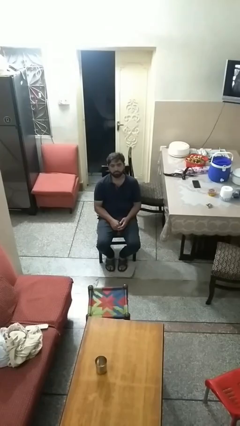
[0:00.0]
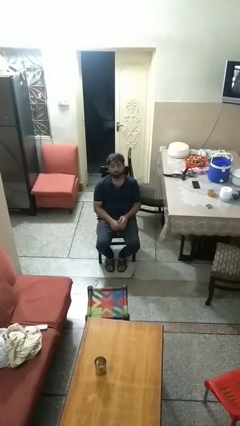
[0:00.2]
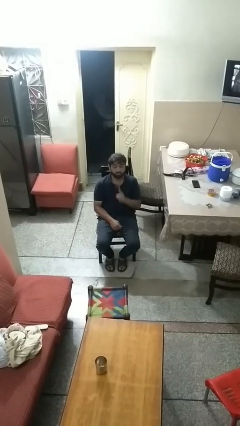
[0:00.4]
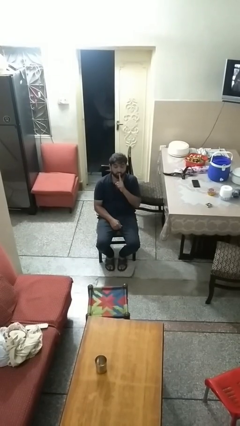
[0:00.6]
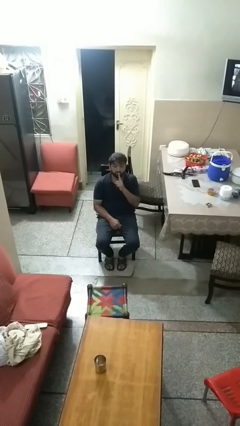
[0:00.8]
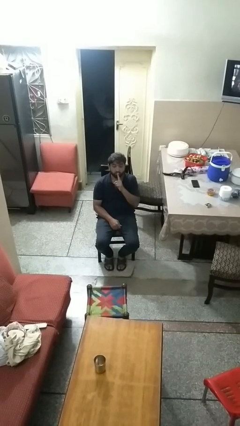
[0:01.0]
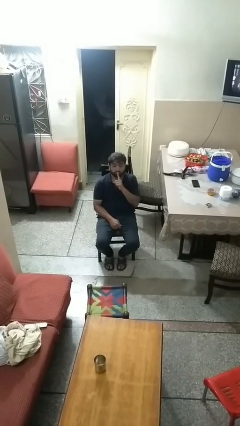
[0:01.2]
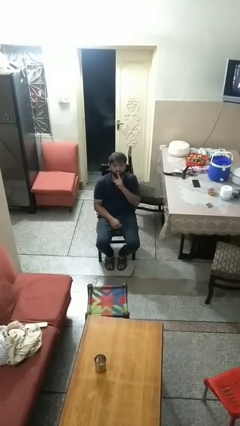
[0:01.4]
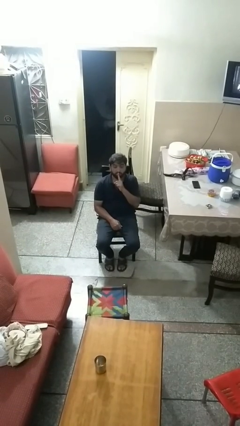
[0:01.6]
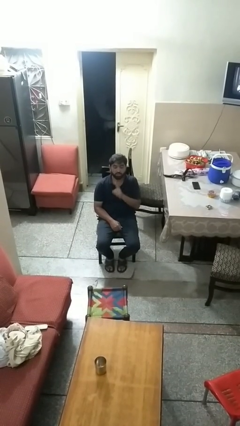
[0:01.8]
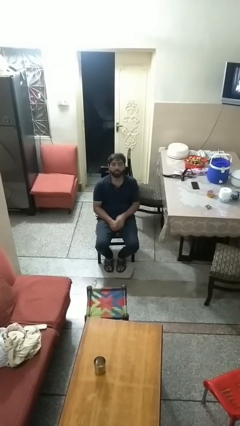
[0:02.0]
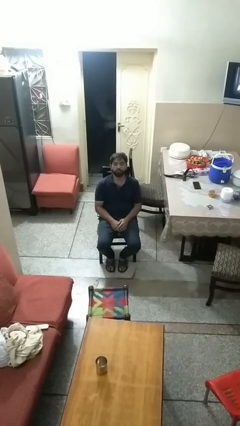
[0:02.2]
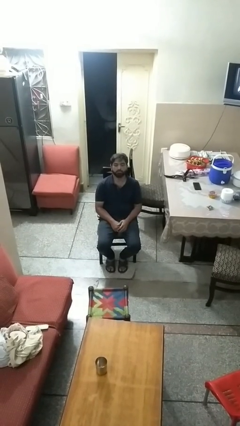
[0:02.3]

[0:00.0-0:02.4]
person gestures be quiet

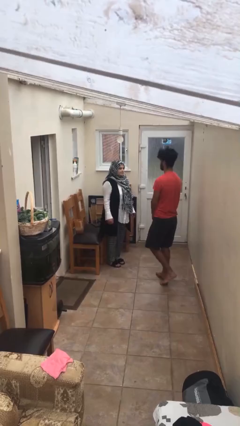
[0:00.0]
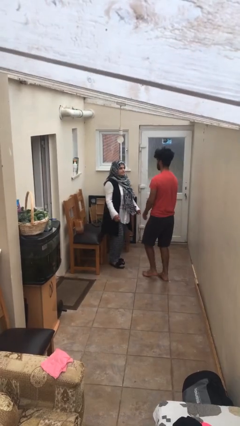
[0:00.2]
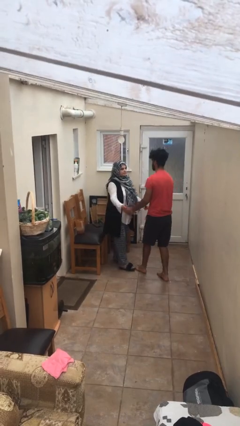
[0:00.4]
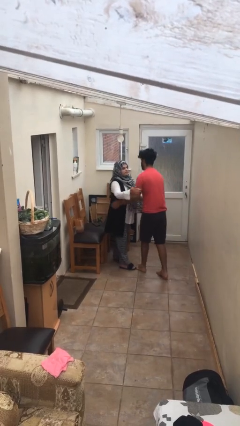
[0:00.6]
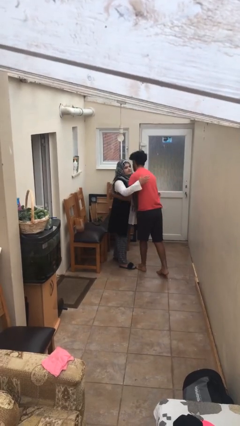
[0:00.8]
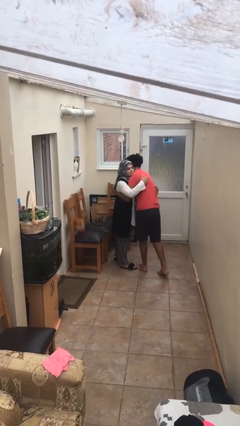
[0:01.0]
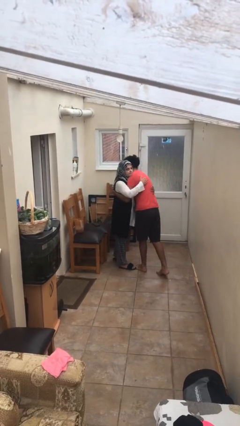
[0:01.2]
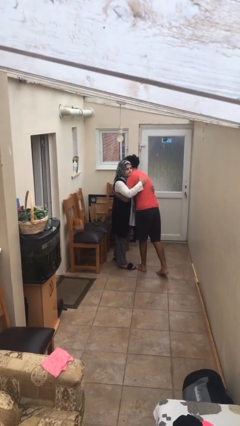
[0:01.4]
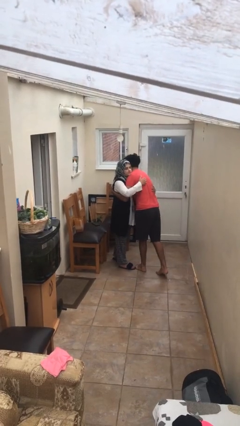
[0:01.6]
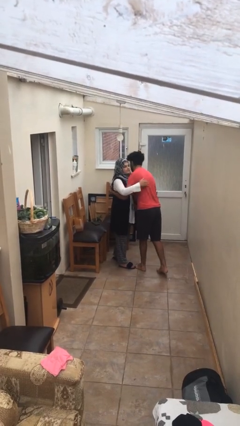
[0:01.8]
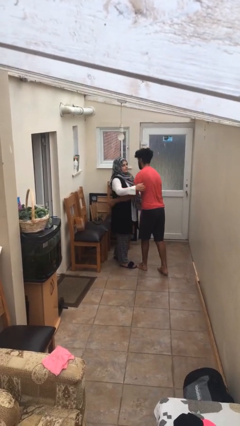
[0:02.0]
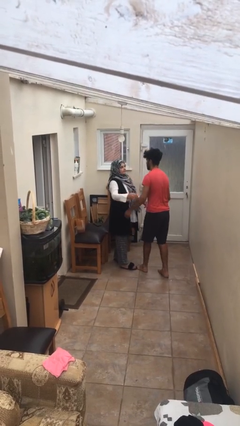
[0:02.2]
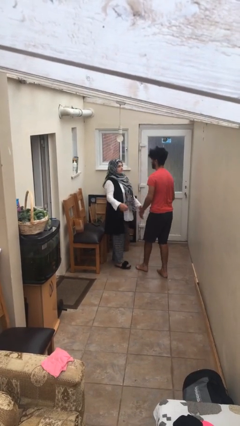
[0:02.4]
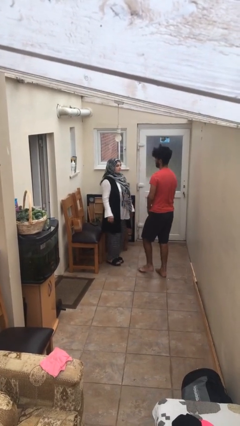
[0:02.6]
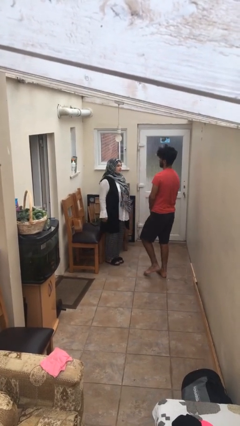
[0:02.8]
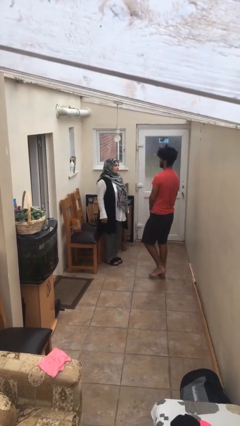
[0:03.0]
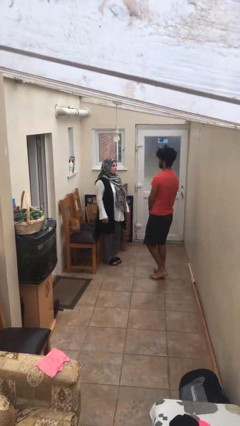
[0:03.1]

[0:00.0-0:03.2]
person embraces person

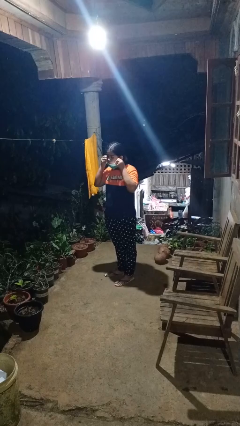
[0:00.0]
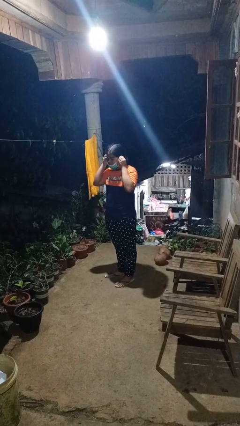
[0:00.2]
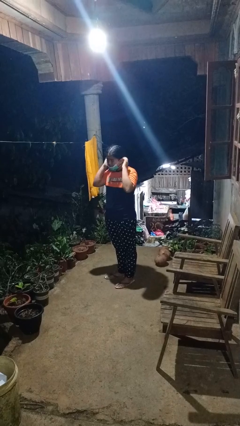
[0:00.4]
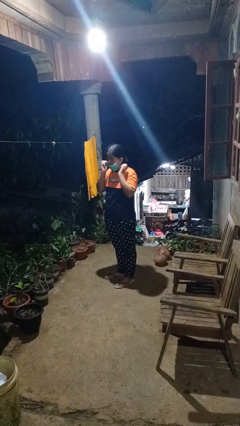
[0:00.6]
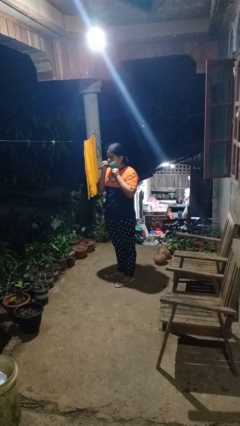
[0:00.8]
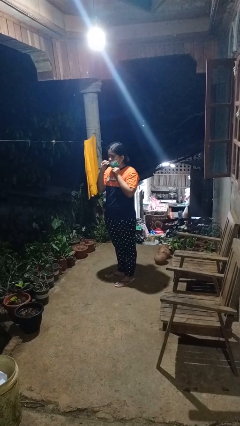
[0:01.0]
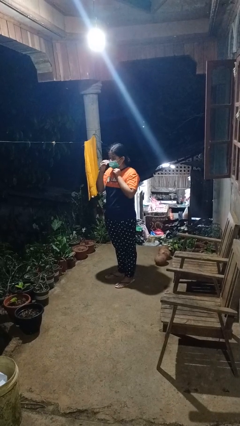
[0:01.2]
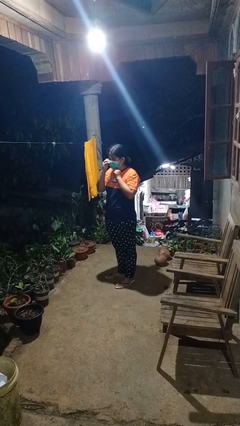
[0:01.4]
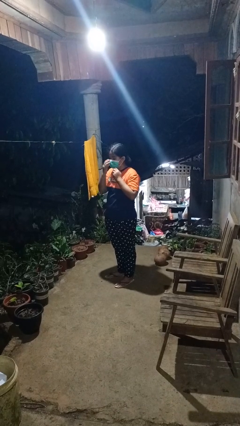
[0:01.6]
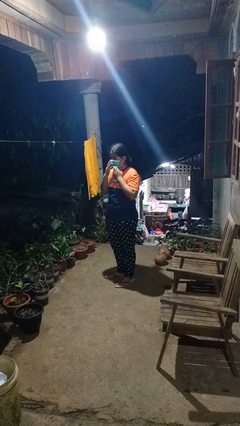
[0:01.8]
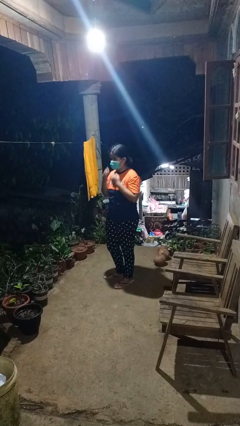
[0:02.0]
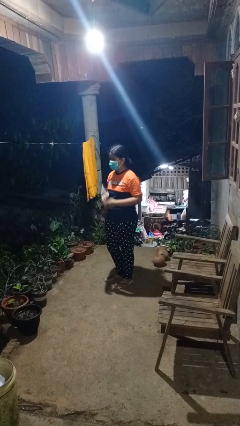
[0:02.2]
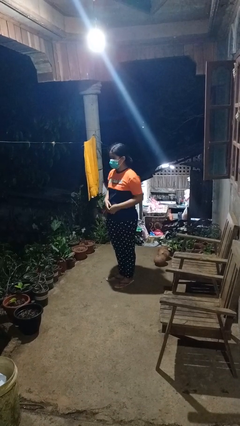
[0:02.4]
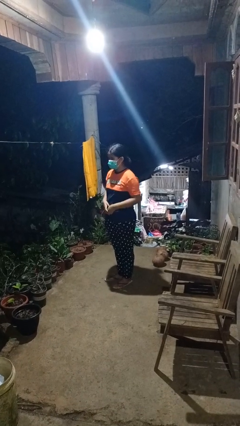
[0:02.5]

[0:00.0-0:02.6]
person puts on facemask

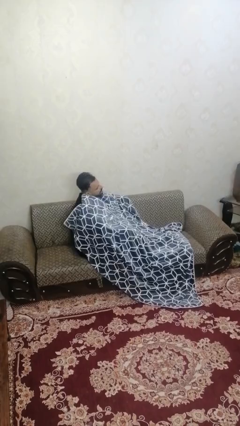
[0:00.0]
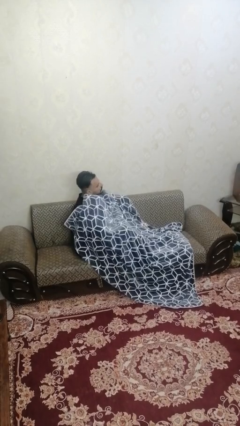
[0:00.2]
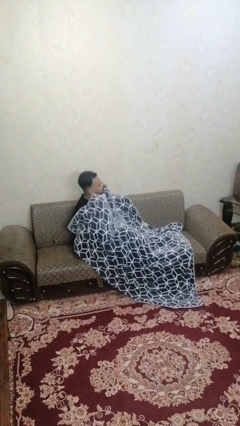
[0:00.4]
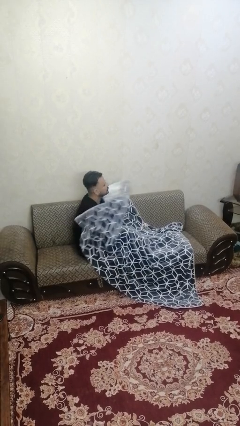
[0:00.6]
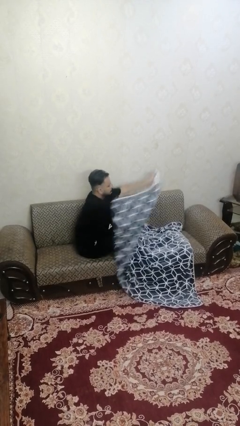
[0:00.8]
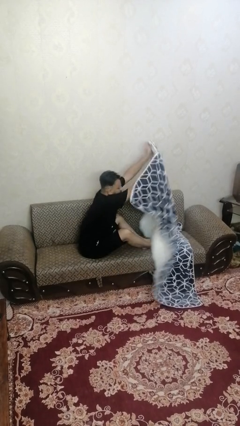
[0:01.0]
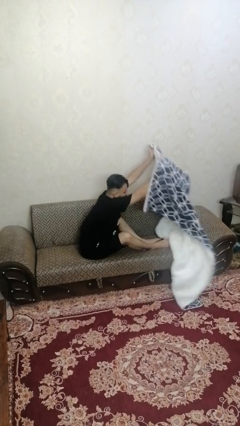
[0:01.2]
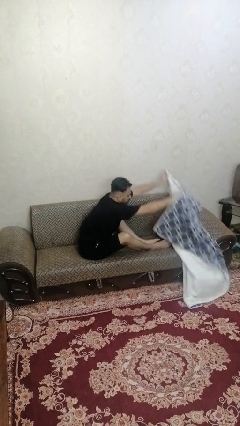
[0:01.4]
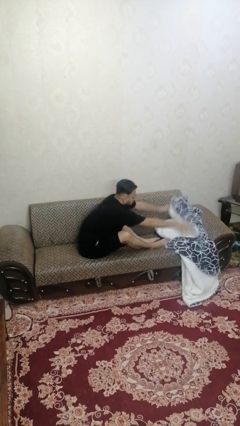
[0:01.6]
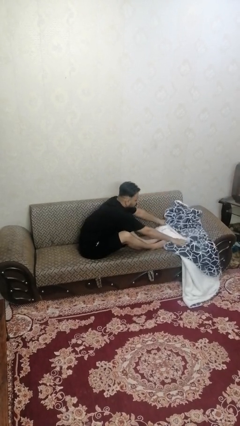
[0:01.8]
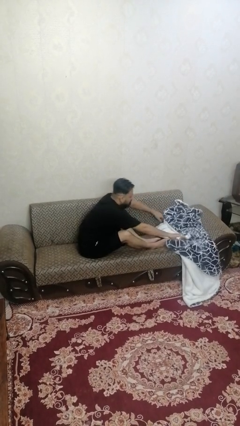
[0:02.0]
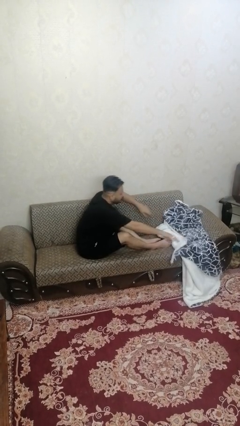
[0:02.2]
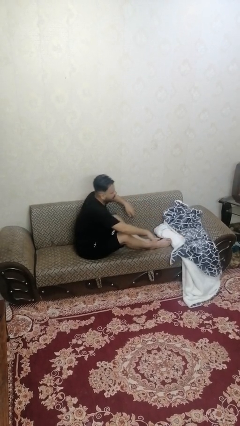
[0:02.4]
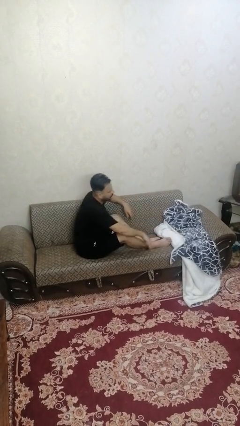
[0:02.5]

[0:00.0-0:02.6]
person uncovers with blanket

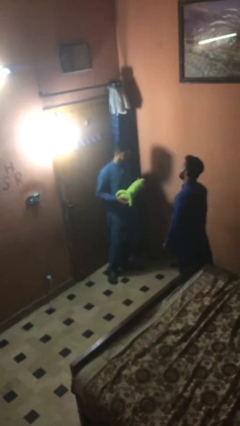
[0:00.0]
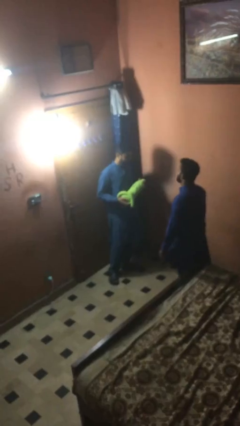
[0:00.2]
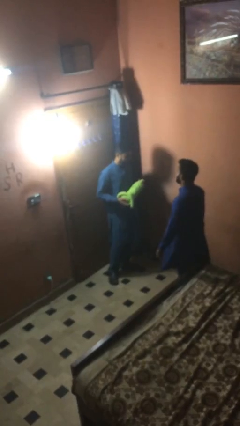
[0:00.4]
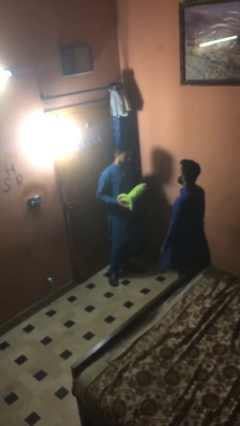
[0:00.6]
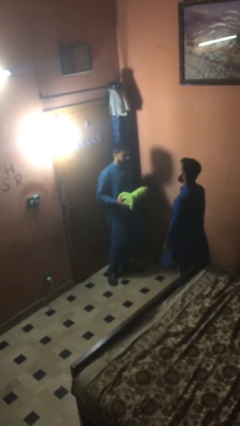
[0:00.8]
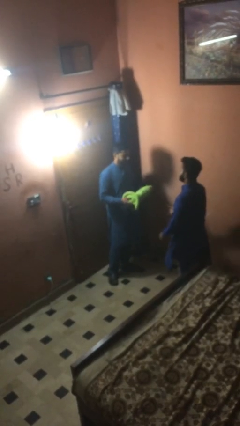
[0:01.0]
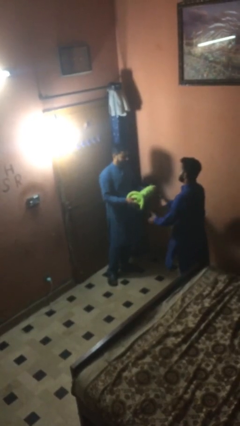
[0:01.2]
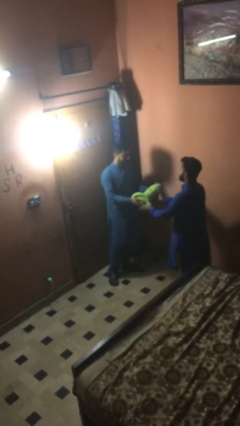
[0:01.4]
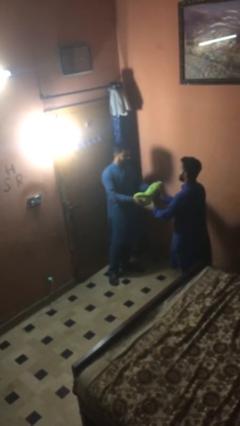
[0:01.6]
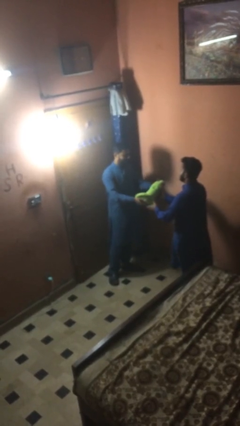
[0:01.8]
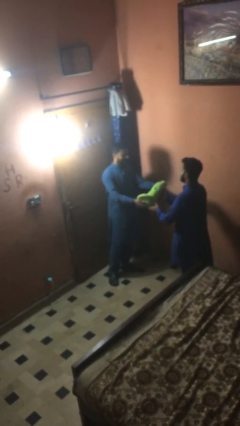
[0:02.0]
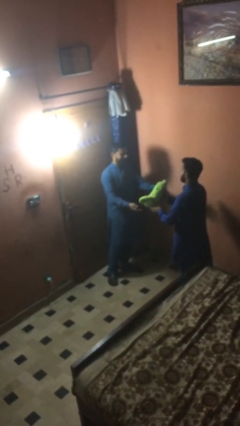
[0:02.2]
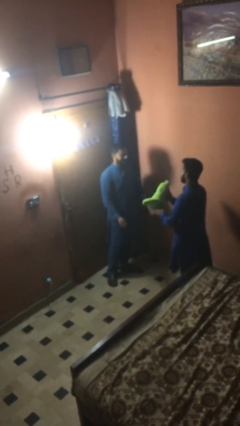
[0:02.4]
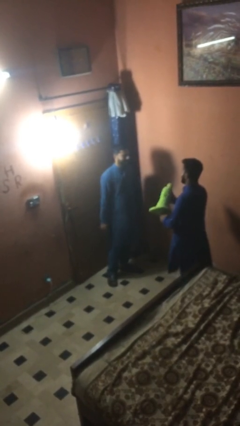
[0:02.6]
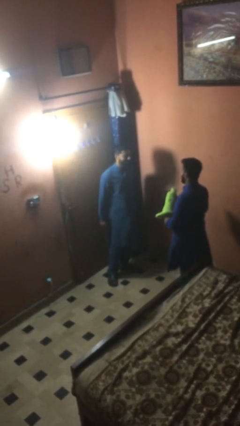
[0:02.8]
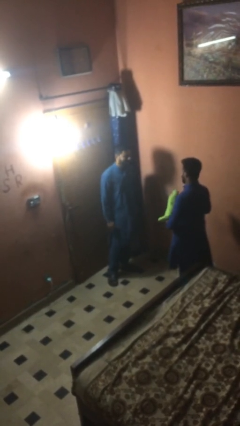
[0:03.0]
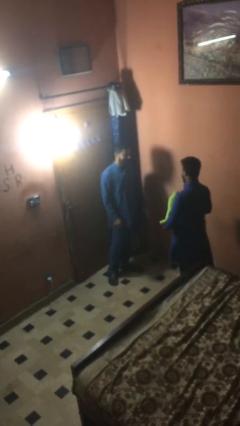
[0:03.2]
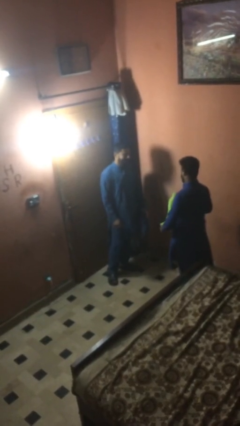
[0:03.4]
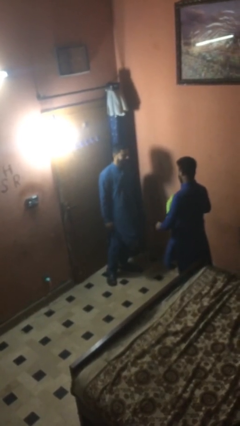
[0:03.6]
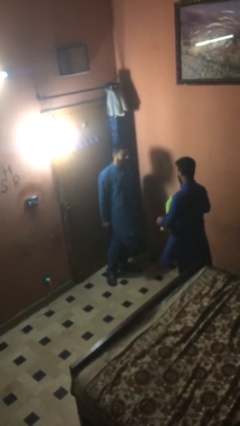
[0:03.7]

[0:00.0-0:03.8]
person transfers object to person

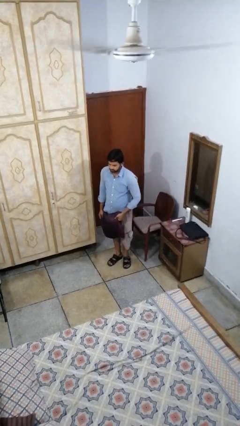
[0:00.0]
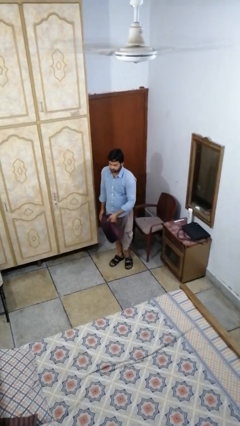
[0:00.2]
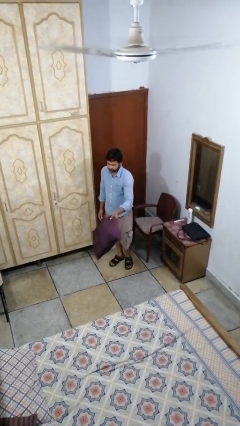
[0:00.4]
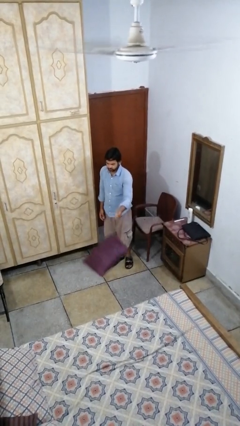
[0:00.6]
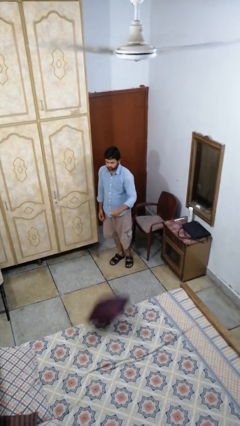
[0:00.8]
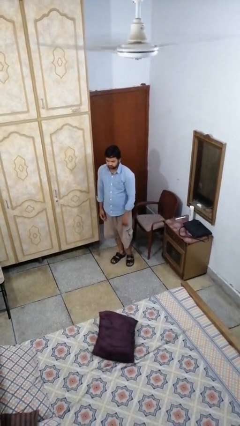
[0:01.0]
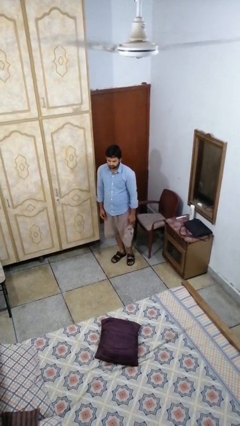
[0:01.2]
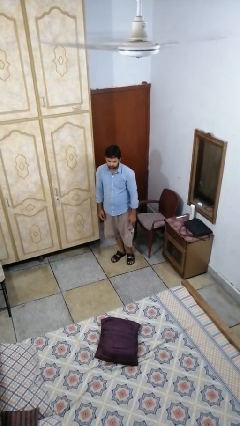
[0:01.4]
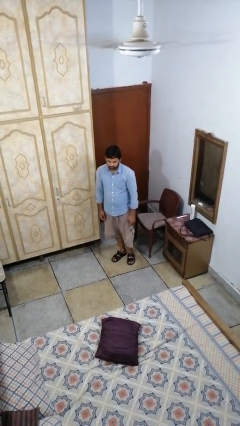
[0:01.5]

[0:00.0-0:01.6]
person throws object on bed

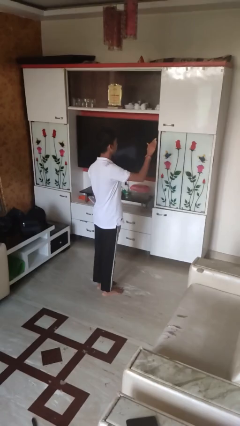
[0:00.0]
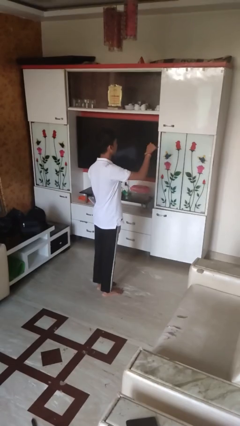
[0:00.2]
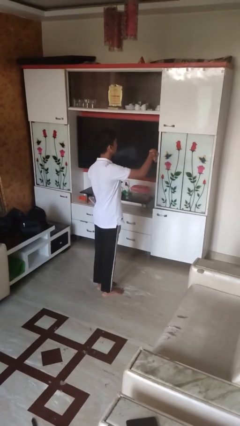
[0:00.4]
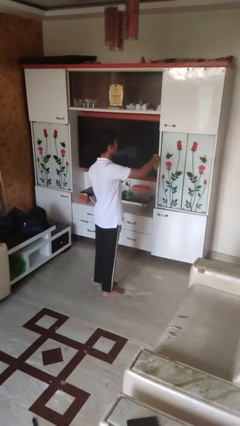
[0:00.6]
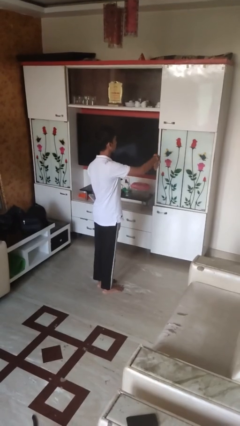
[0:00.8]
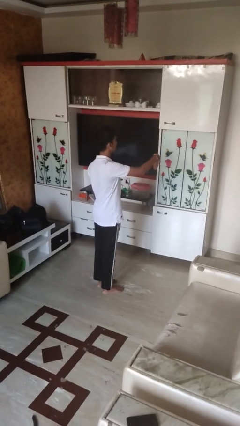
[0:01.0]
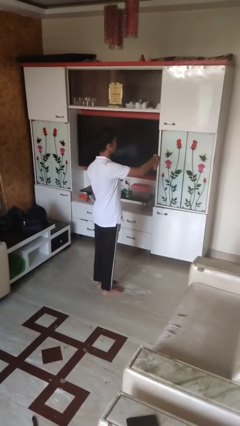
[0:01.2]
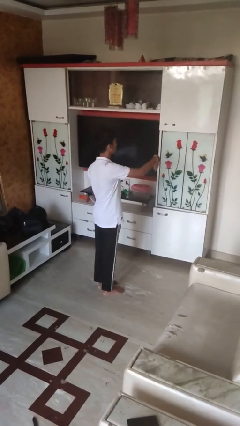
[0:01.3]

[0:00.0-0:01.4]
person gestures swipe down
